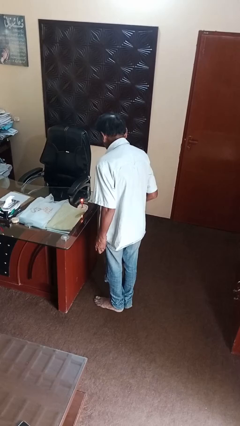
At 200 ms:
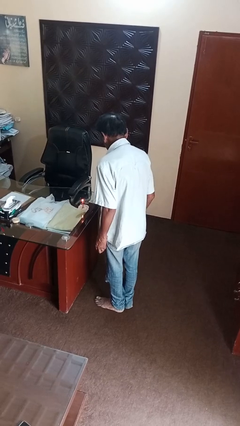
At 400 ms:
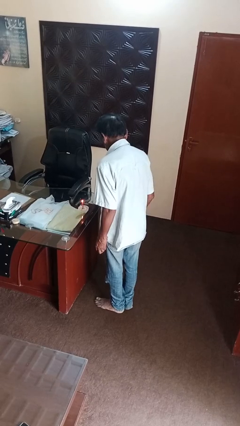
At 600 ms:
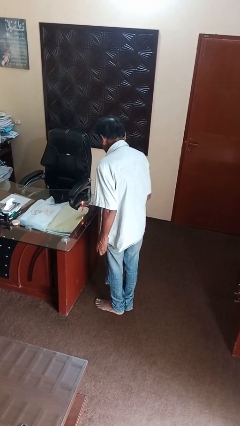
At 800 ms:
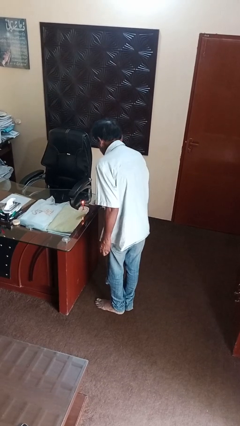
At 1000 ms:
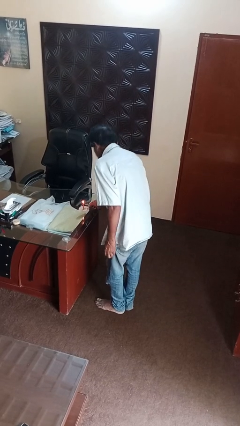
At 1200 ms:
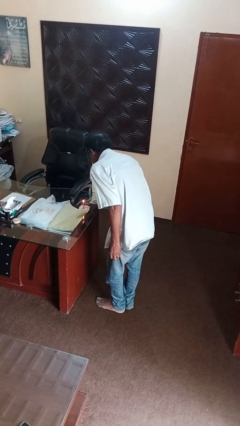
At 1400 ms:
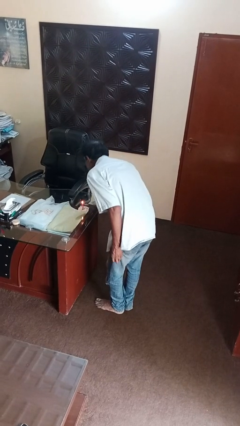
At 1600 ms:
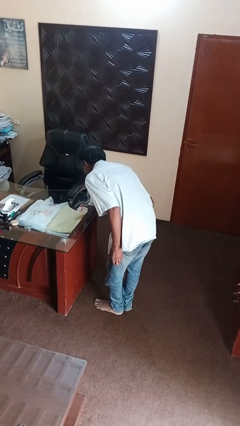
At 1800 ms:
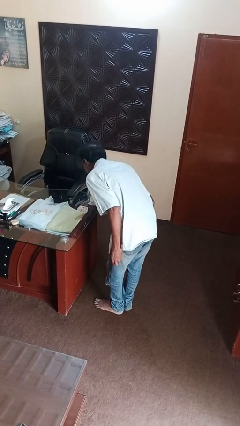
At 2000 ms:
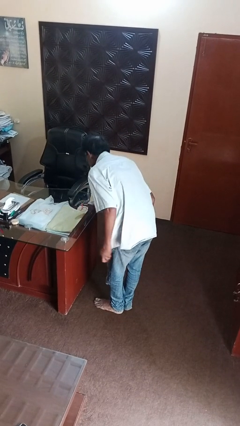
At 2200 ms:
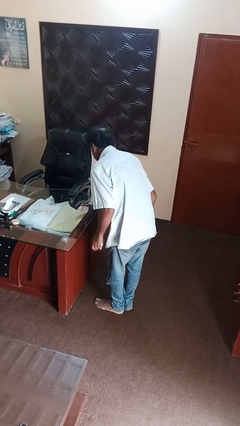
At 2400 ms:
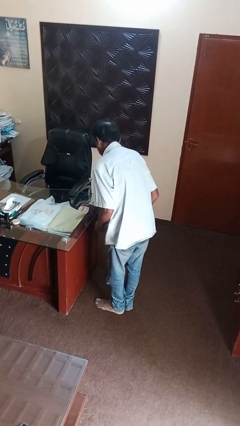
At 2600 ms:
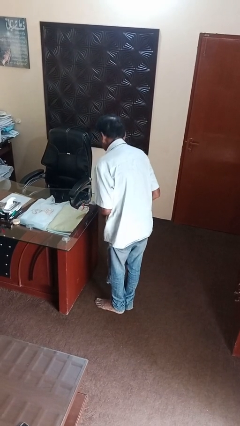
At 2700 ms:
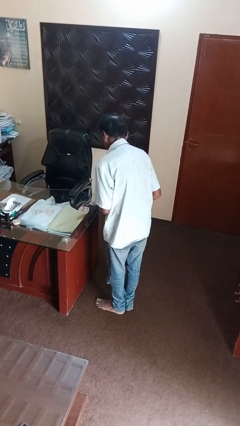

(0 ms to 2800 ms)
person extinguishes candle

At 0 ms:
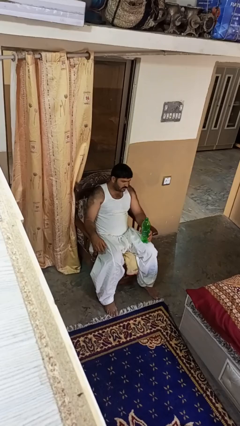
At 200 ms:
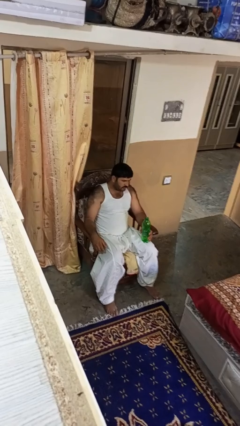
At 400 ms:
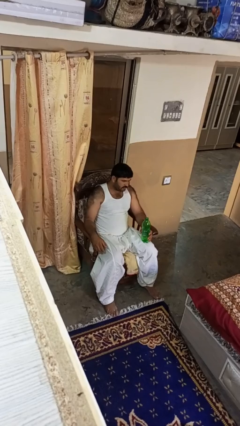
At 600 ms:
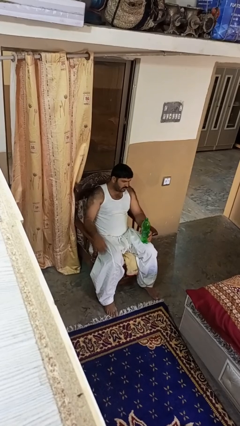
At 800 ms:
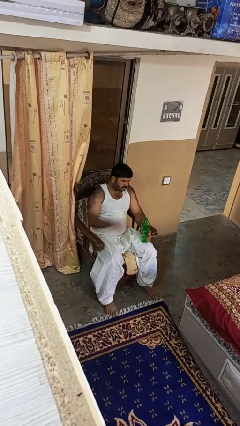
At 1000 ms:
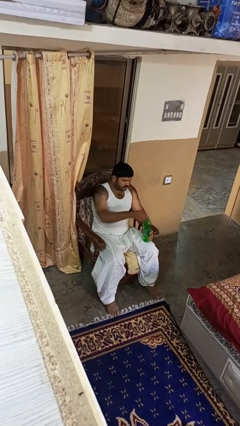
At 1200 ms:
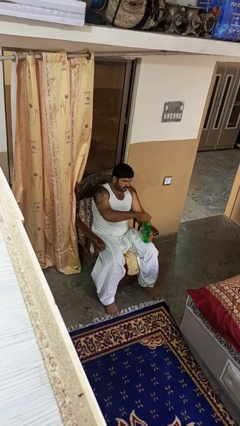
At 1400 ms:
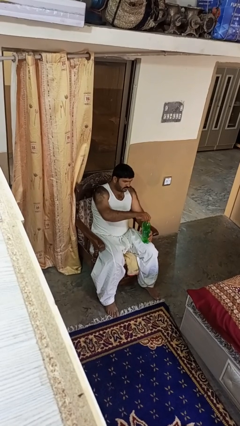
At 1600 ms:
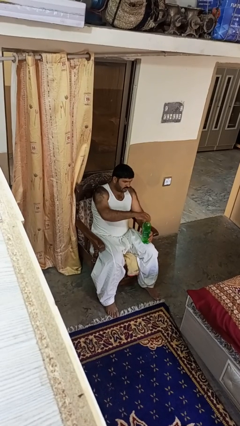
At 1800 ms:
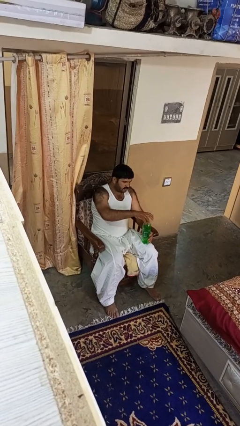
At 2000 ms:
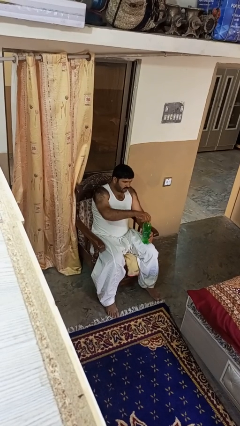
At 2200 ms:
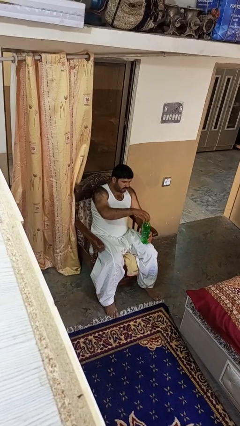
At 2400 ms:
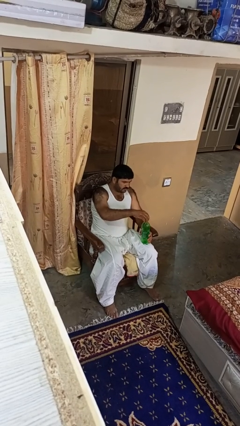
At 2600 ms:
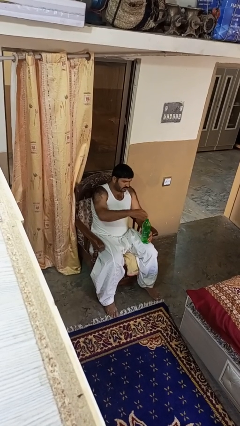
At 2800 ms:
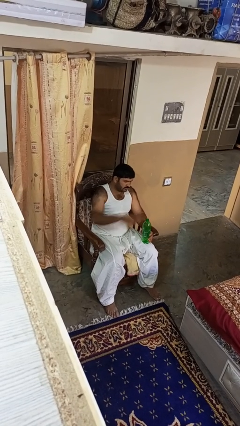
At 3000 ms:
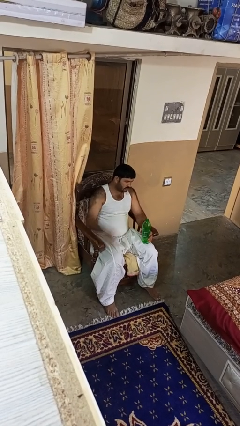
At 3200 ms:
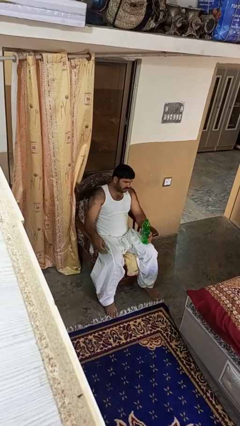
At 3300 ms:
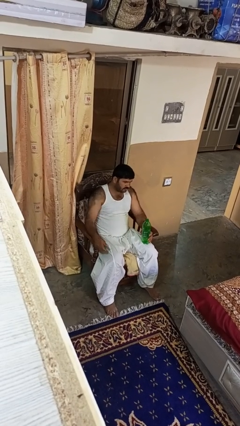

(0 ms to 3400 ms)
person unscrews lid from bottle

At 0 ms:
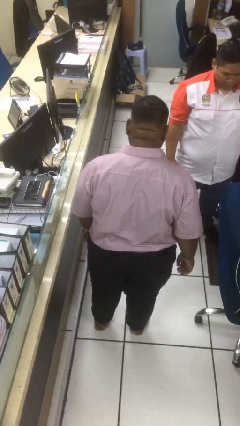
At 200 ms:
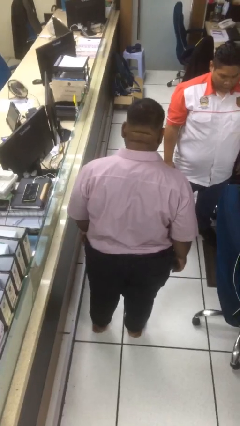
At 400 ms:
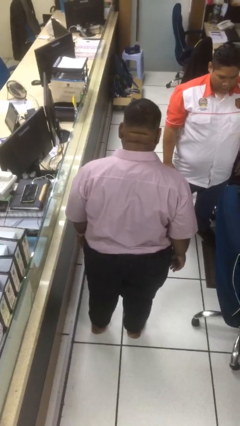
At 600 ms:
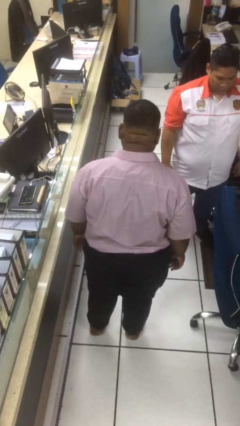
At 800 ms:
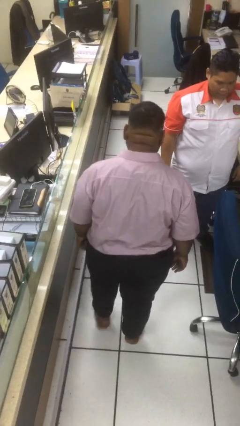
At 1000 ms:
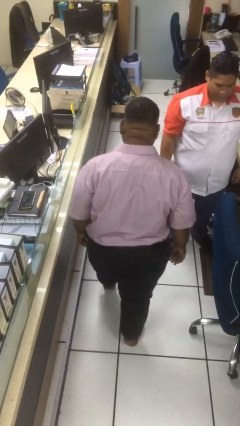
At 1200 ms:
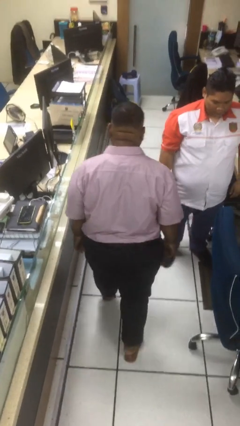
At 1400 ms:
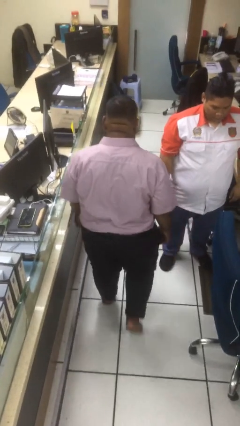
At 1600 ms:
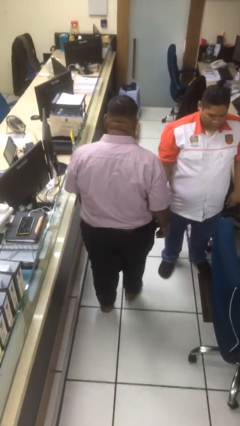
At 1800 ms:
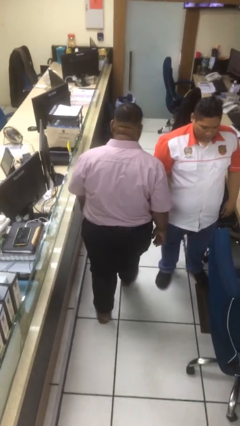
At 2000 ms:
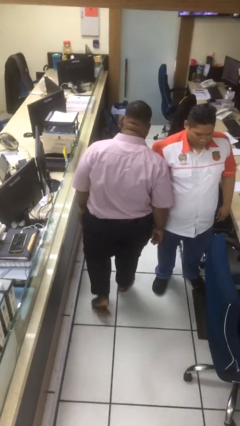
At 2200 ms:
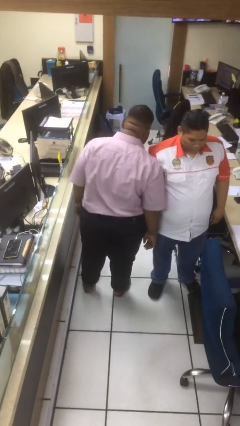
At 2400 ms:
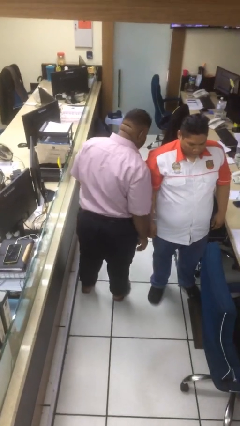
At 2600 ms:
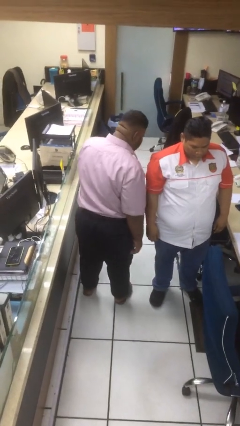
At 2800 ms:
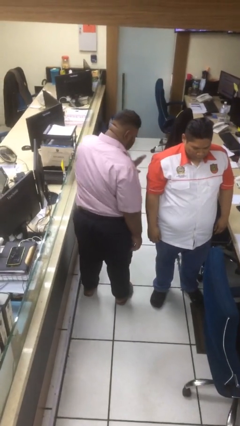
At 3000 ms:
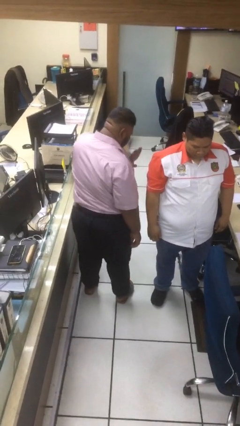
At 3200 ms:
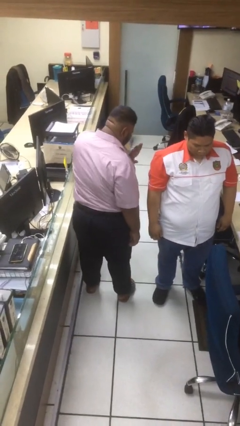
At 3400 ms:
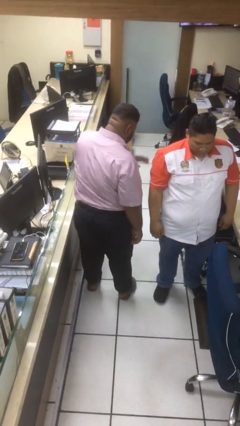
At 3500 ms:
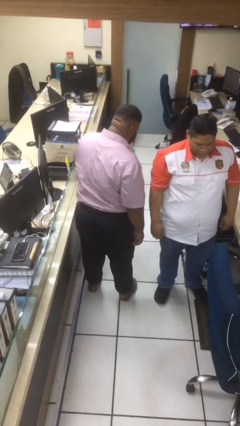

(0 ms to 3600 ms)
person bumps into person

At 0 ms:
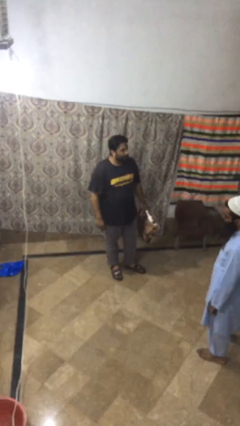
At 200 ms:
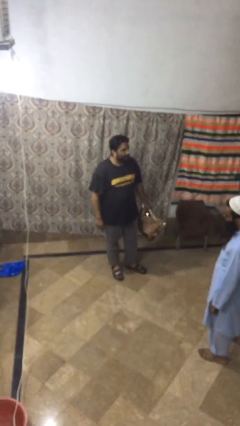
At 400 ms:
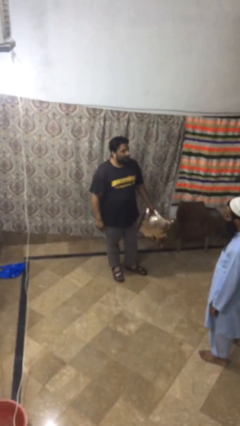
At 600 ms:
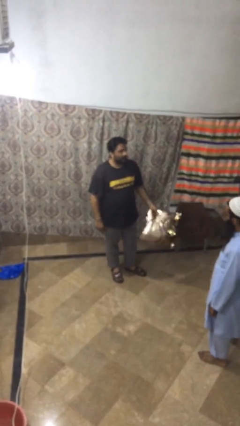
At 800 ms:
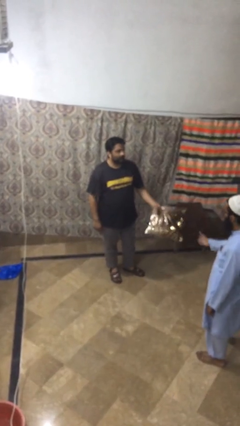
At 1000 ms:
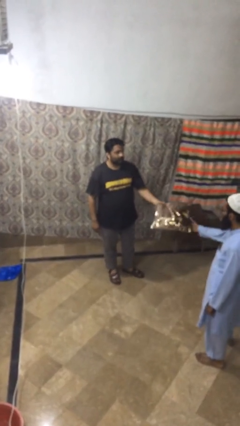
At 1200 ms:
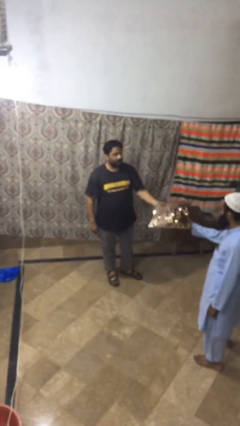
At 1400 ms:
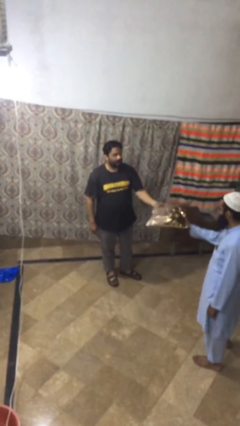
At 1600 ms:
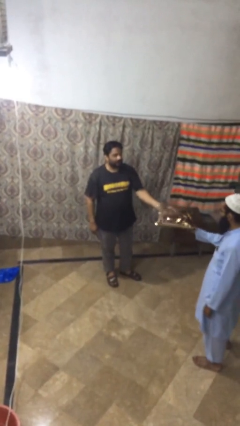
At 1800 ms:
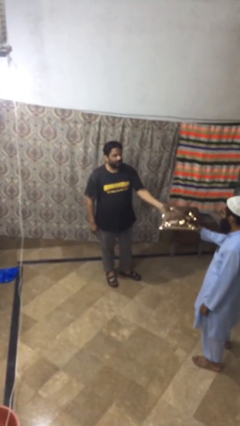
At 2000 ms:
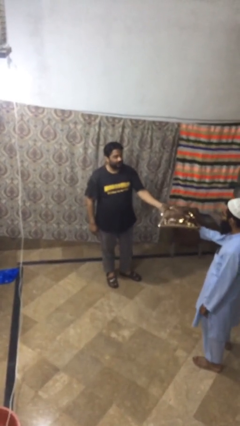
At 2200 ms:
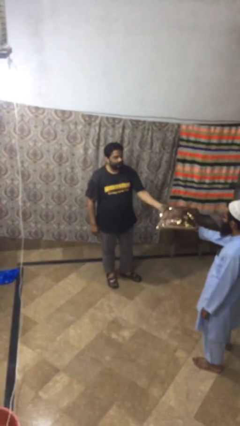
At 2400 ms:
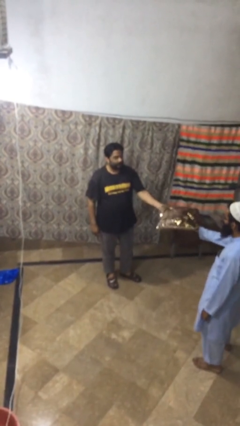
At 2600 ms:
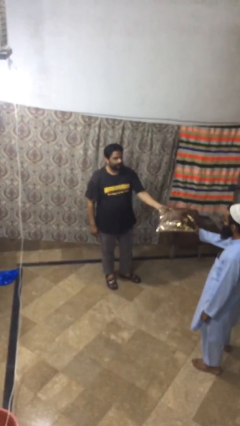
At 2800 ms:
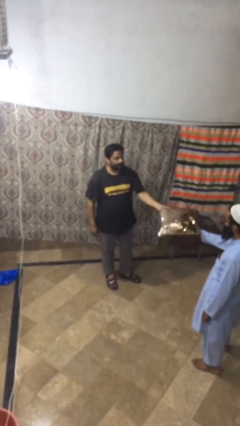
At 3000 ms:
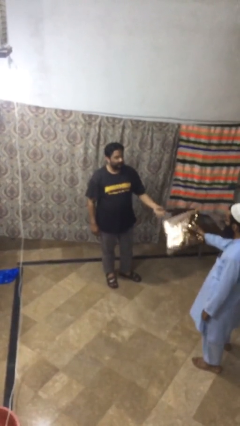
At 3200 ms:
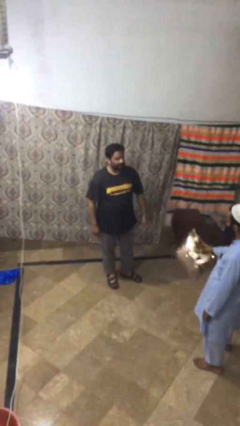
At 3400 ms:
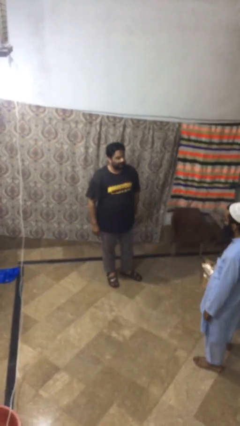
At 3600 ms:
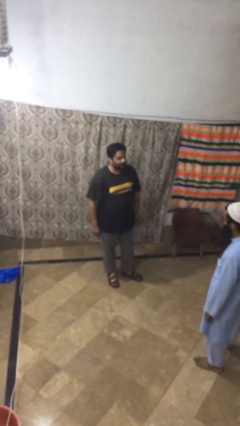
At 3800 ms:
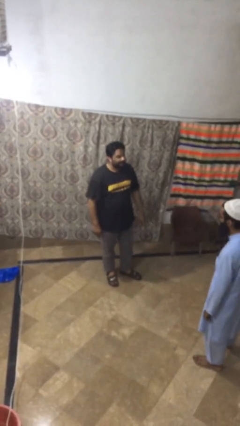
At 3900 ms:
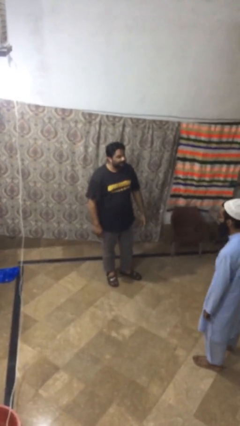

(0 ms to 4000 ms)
person transfers object to person

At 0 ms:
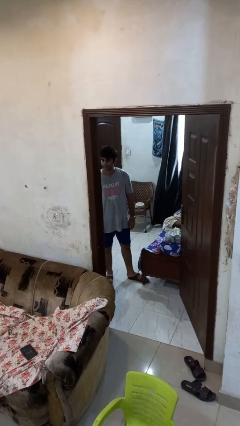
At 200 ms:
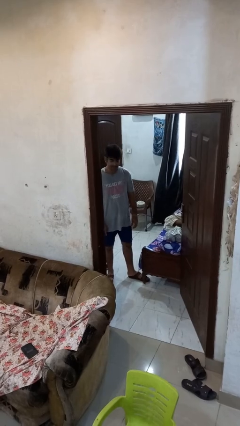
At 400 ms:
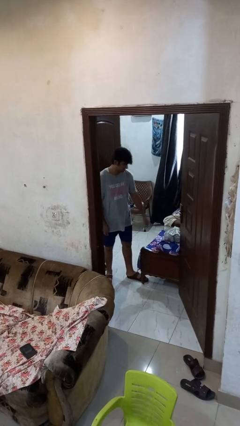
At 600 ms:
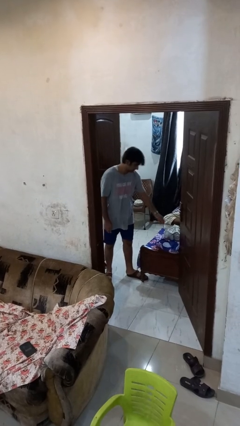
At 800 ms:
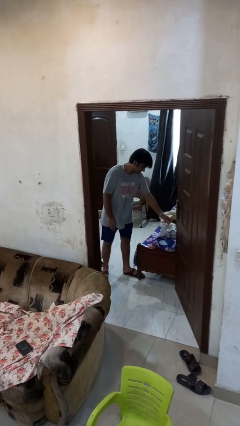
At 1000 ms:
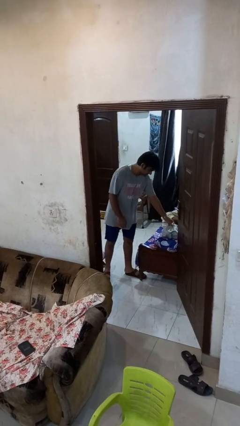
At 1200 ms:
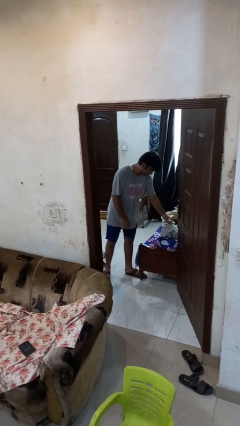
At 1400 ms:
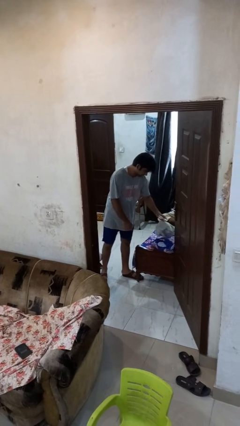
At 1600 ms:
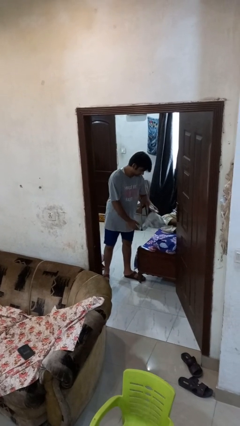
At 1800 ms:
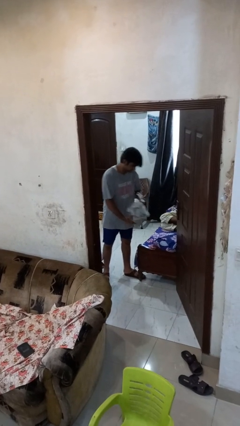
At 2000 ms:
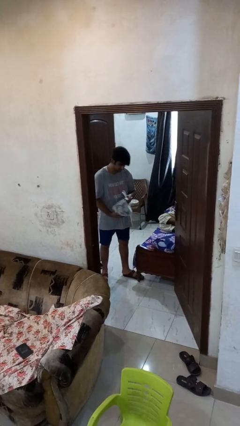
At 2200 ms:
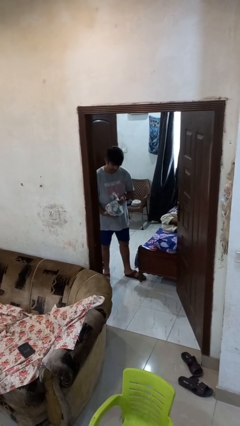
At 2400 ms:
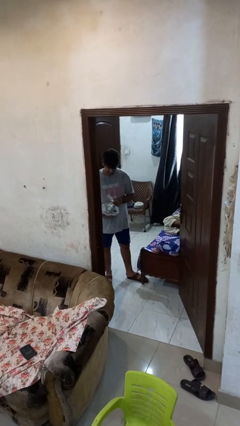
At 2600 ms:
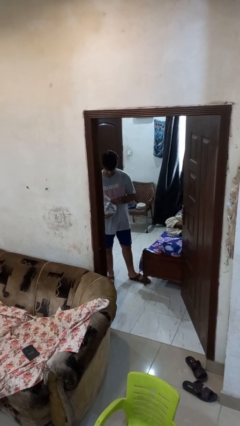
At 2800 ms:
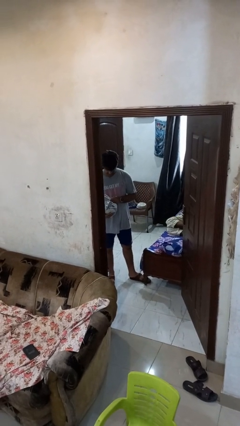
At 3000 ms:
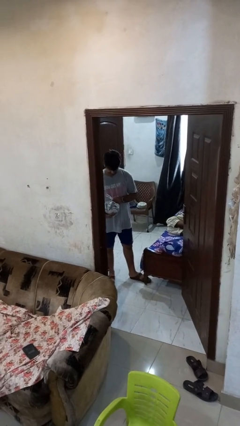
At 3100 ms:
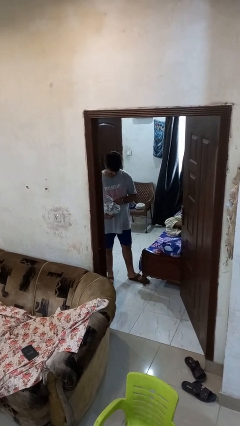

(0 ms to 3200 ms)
person picks up object from bed

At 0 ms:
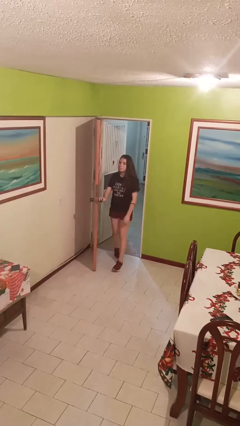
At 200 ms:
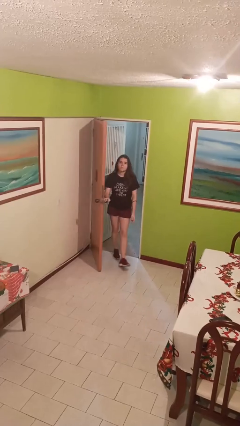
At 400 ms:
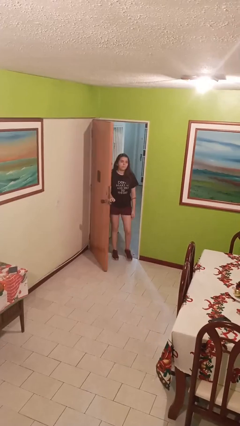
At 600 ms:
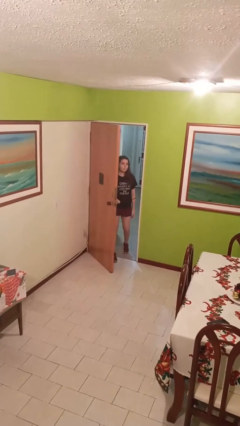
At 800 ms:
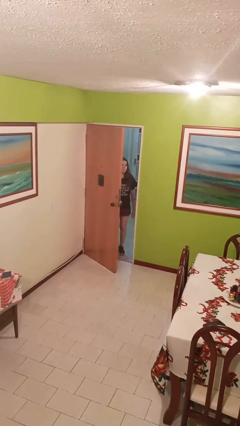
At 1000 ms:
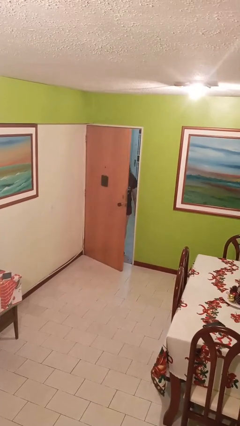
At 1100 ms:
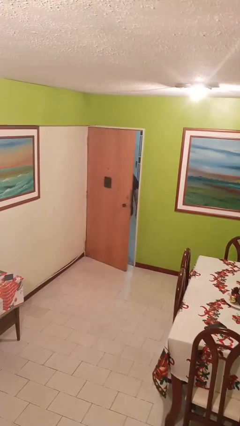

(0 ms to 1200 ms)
person closes facility door
